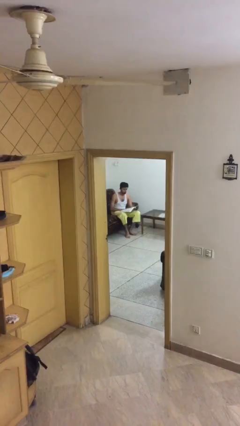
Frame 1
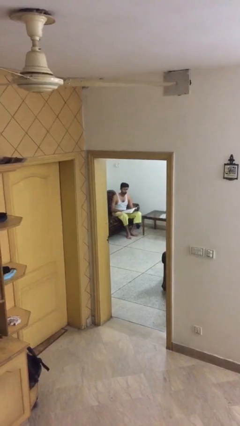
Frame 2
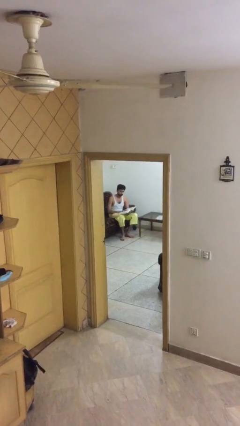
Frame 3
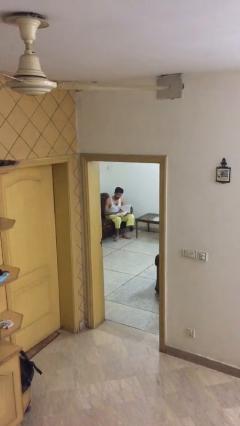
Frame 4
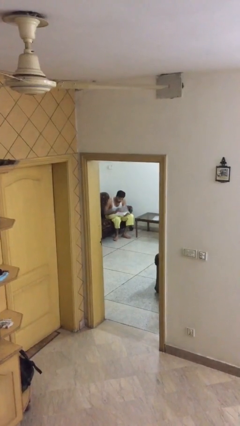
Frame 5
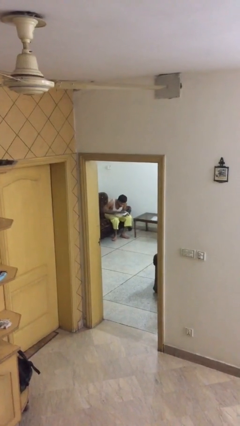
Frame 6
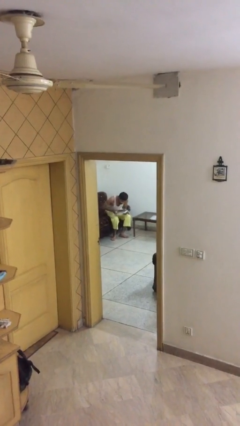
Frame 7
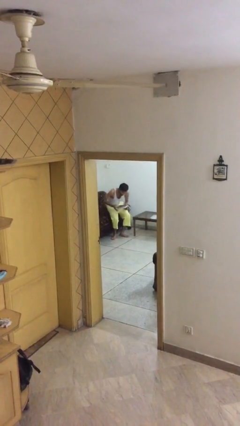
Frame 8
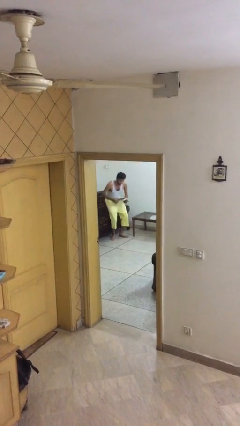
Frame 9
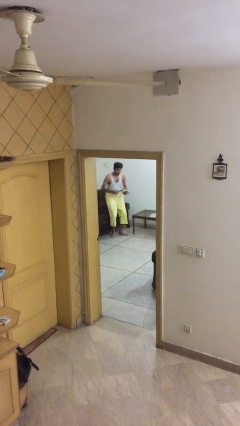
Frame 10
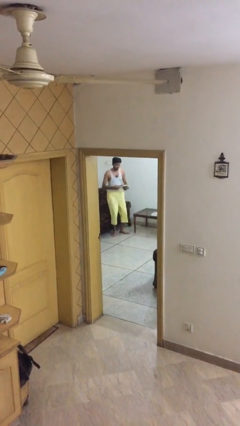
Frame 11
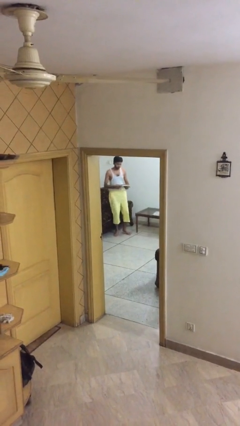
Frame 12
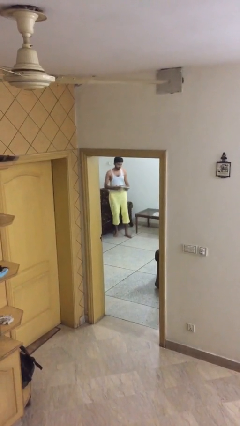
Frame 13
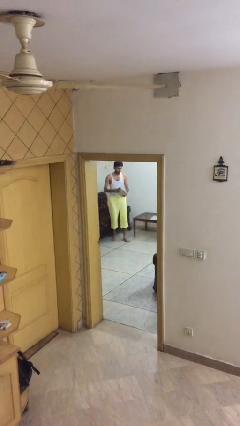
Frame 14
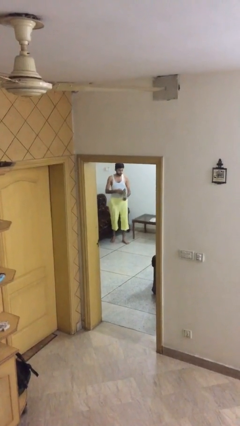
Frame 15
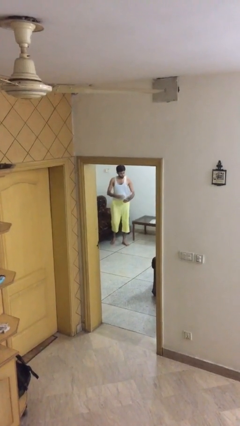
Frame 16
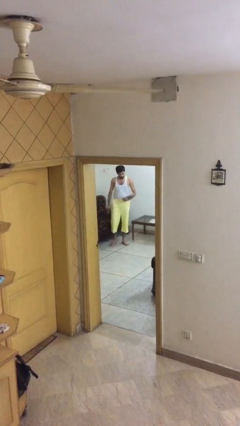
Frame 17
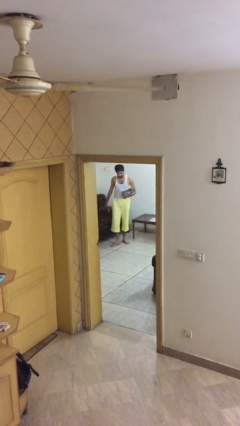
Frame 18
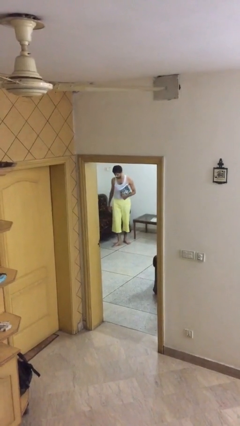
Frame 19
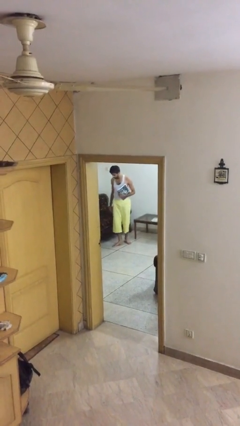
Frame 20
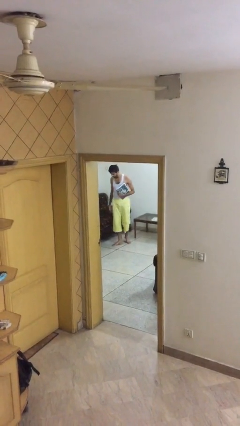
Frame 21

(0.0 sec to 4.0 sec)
person stands up

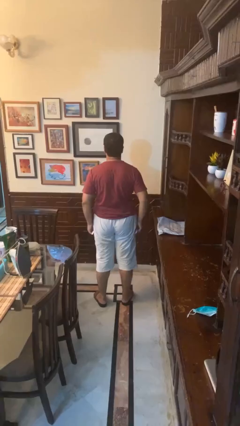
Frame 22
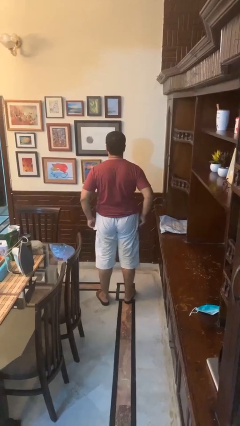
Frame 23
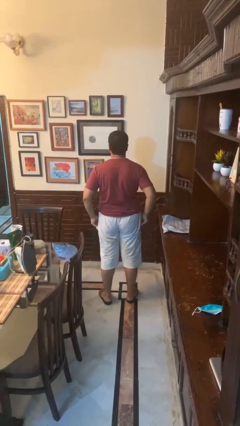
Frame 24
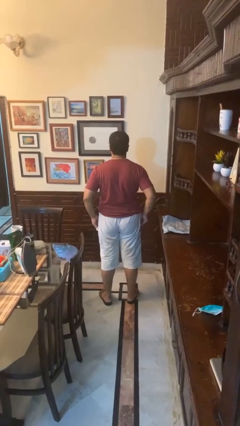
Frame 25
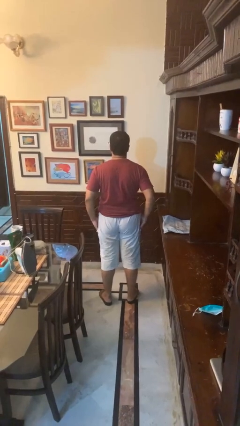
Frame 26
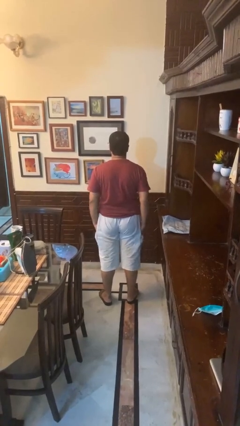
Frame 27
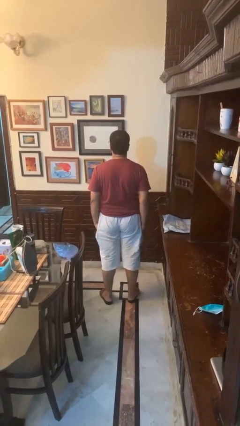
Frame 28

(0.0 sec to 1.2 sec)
person puts hands in back pockets

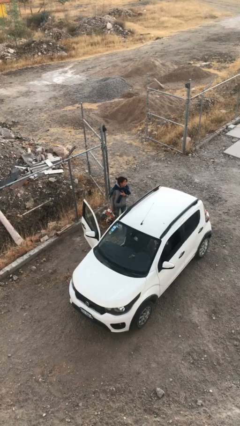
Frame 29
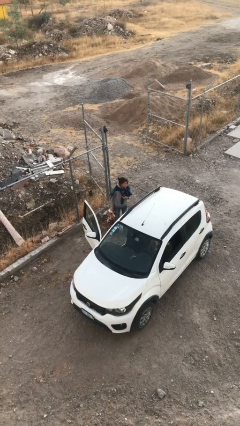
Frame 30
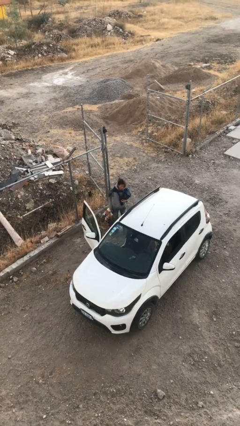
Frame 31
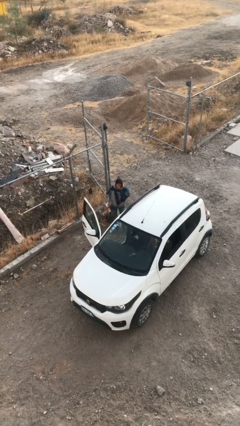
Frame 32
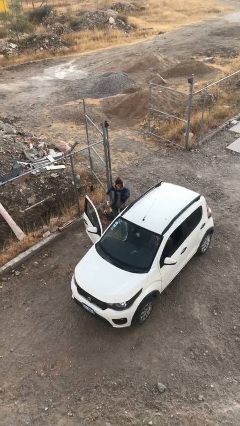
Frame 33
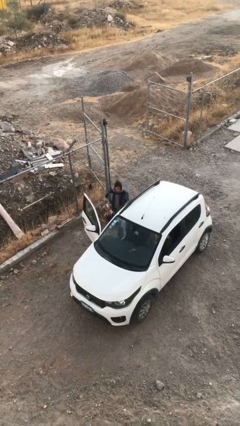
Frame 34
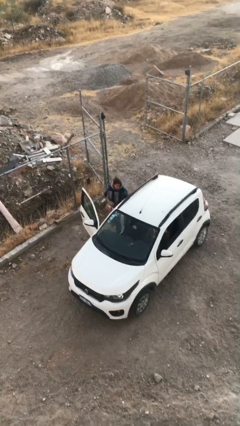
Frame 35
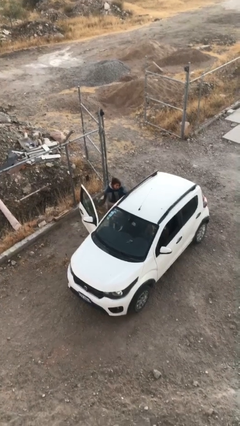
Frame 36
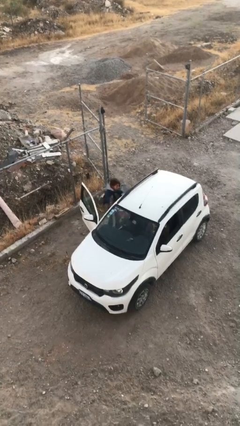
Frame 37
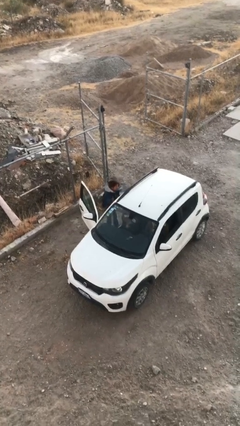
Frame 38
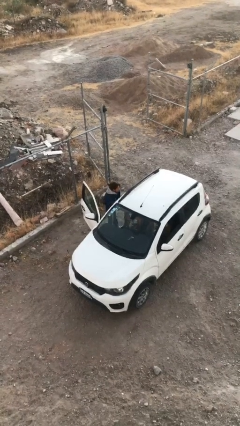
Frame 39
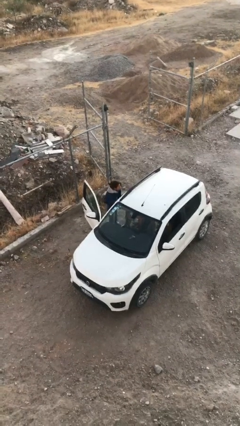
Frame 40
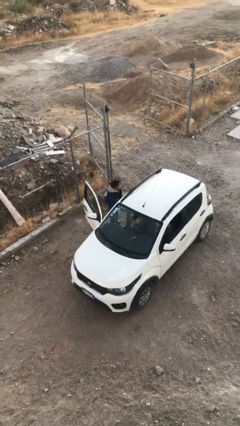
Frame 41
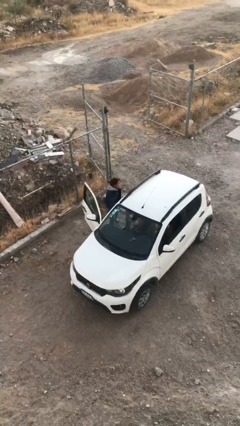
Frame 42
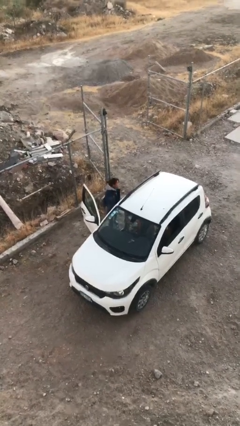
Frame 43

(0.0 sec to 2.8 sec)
person loads car

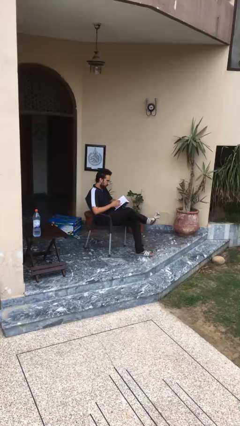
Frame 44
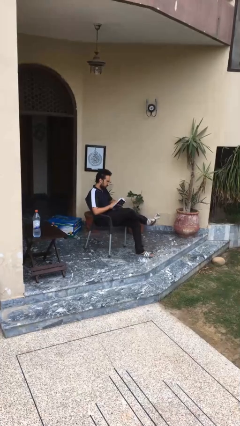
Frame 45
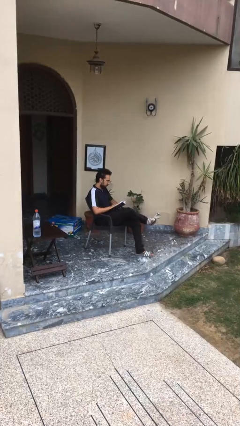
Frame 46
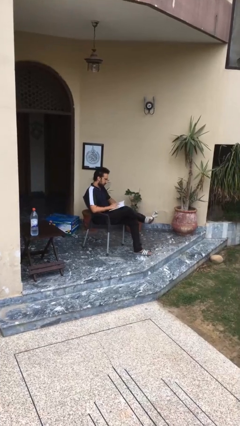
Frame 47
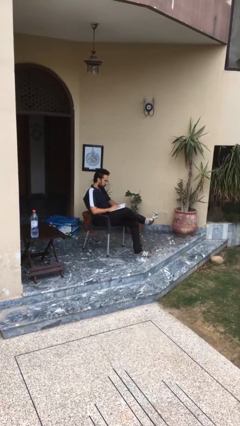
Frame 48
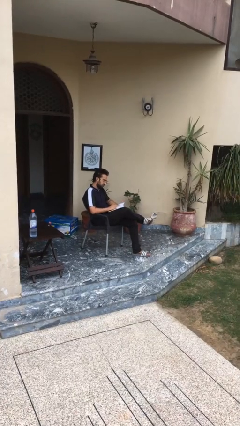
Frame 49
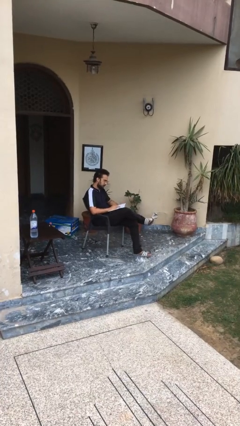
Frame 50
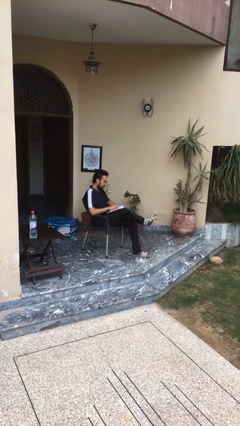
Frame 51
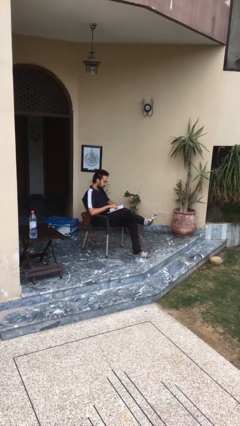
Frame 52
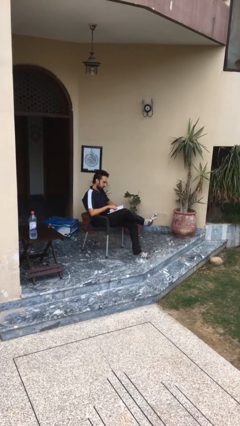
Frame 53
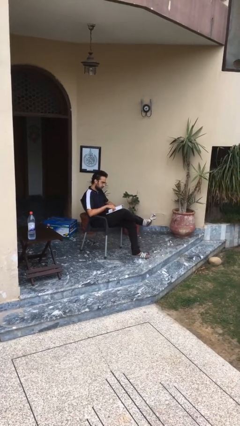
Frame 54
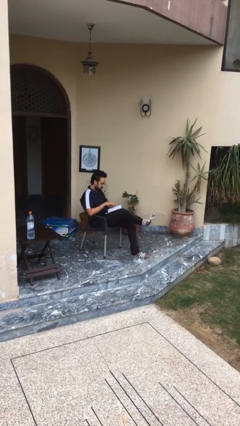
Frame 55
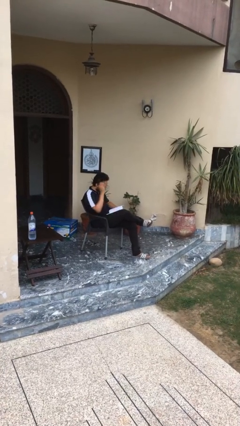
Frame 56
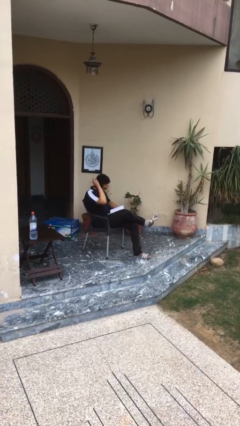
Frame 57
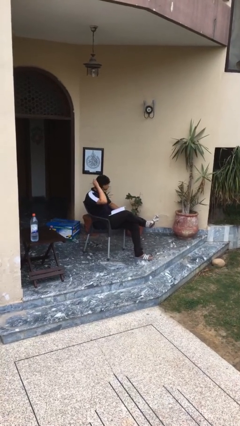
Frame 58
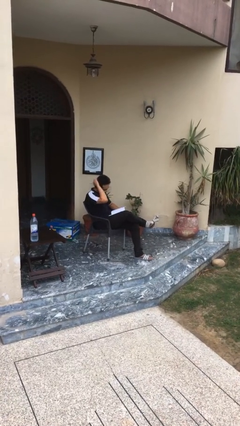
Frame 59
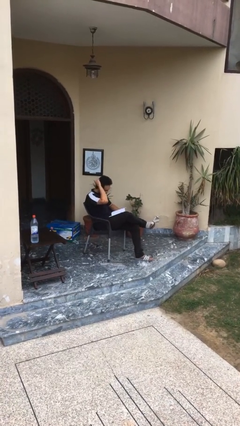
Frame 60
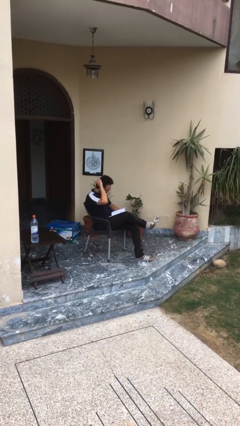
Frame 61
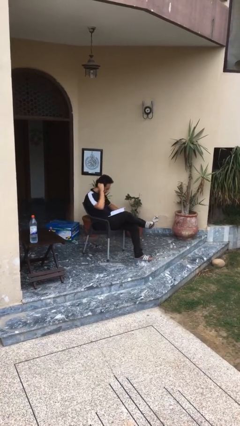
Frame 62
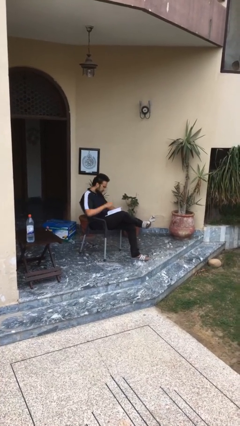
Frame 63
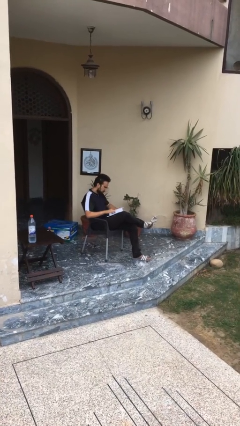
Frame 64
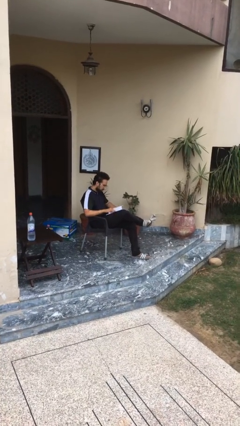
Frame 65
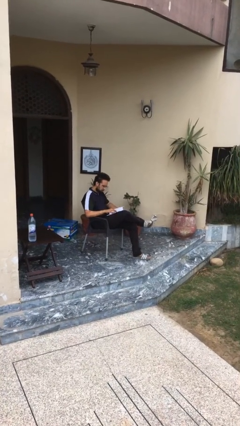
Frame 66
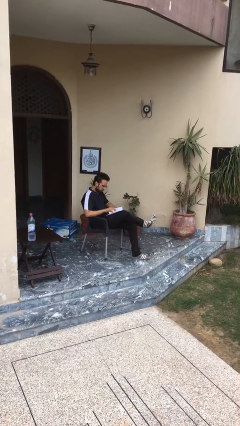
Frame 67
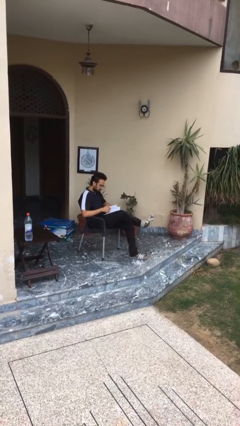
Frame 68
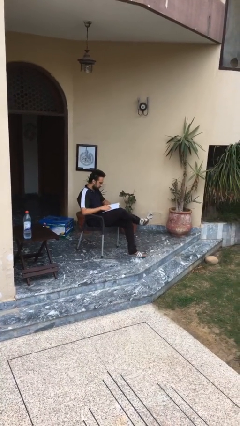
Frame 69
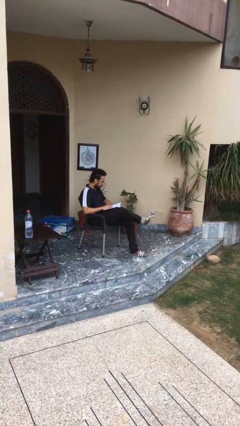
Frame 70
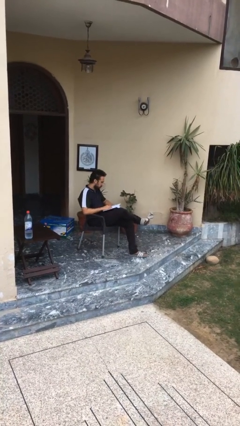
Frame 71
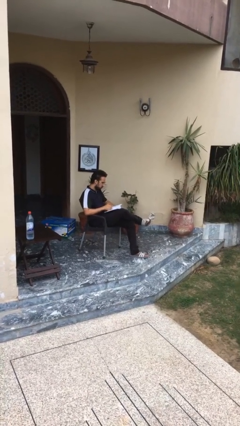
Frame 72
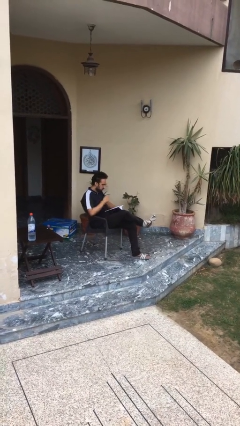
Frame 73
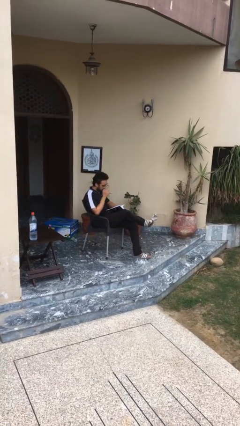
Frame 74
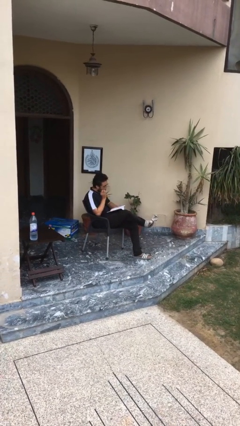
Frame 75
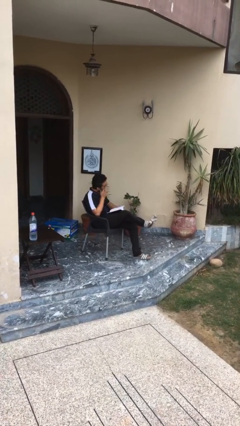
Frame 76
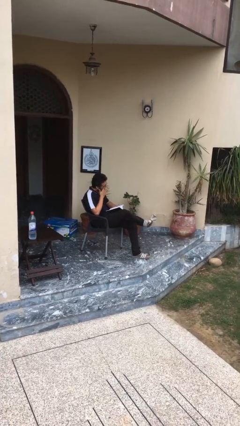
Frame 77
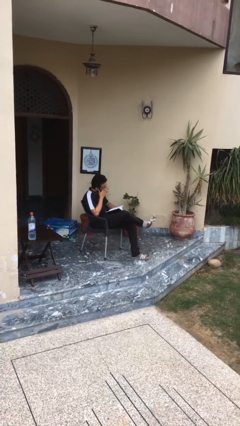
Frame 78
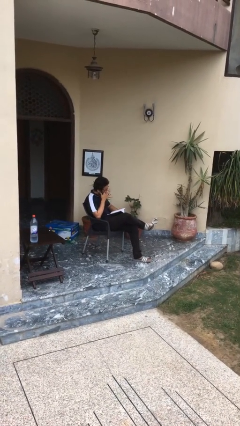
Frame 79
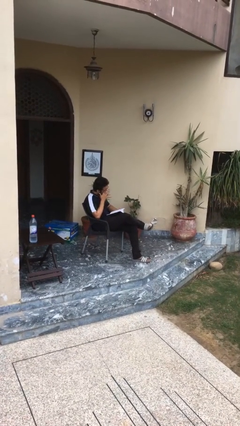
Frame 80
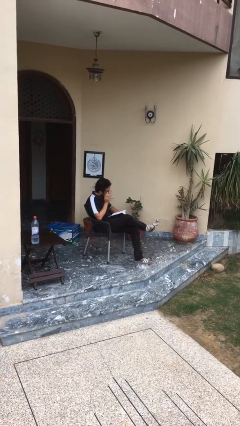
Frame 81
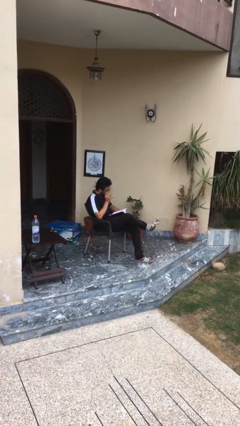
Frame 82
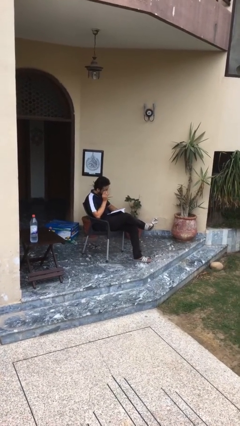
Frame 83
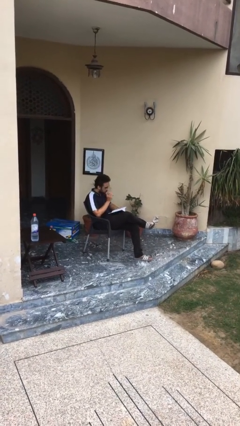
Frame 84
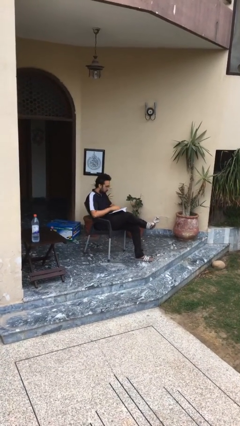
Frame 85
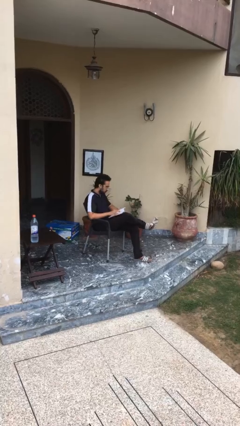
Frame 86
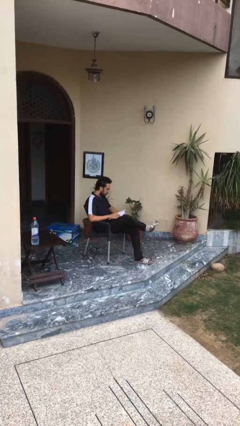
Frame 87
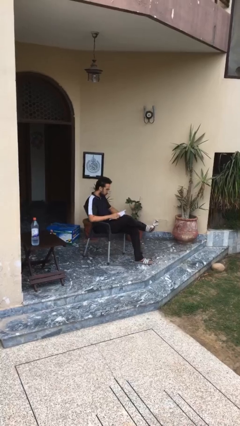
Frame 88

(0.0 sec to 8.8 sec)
person reads document

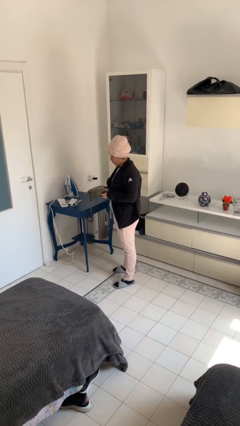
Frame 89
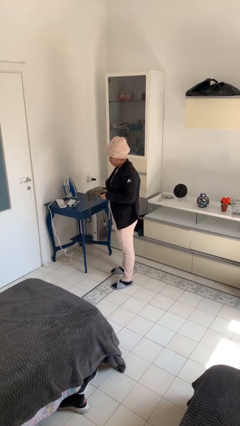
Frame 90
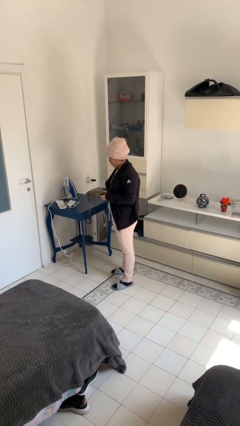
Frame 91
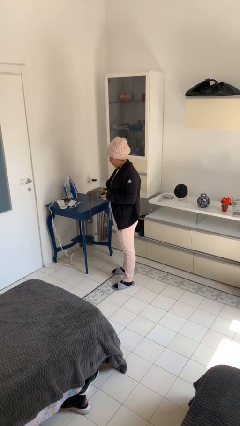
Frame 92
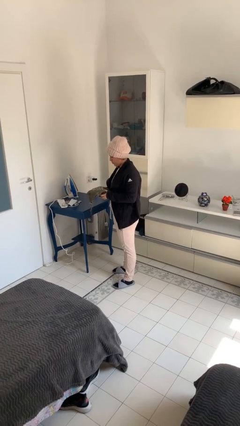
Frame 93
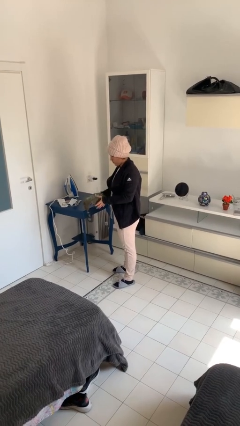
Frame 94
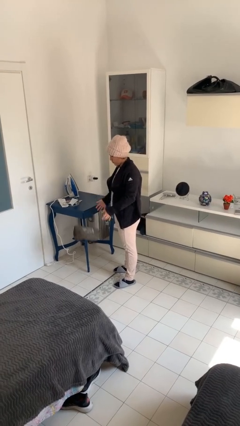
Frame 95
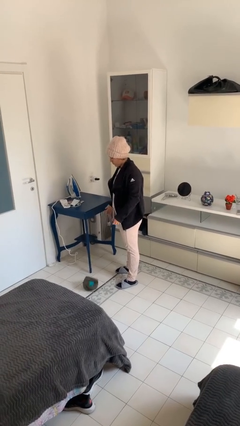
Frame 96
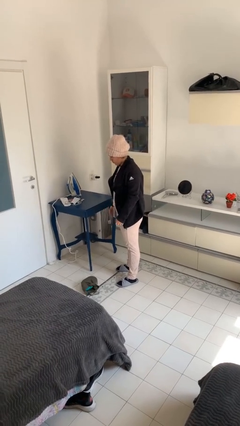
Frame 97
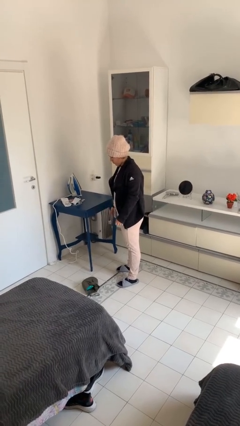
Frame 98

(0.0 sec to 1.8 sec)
person drops object
